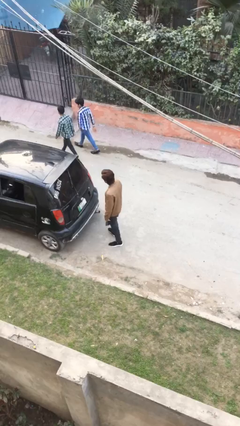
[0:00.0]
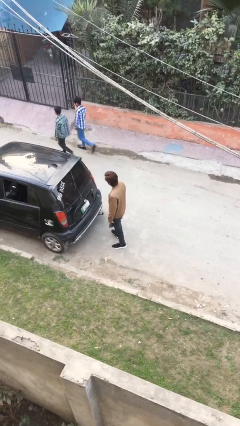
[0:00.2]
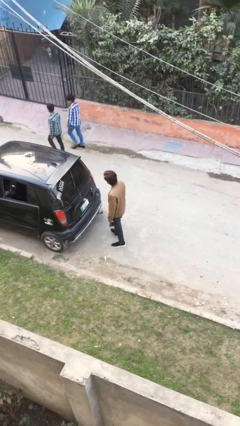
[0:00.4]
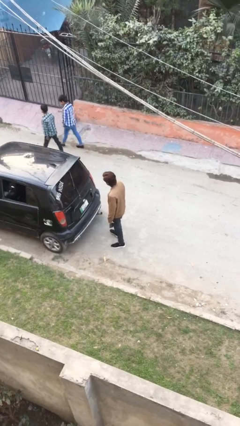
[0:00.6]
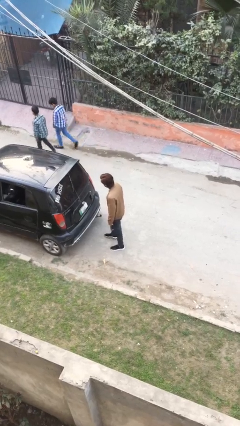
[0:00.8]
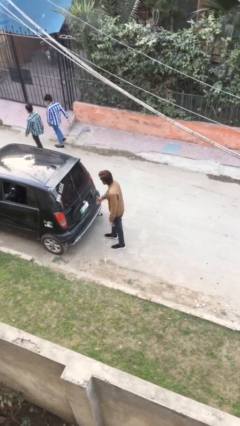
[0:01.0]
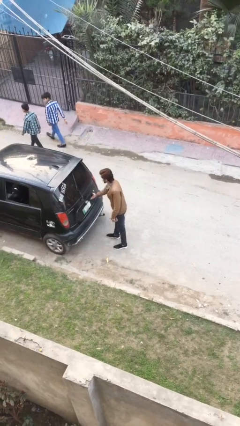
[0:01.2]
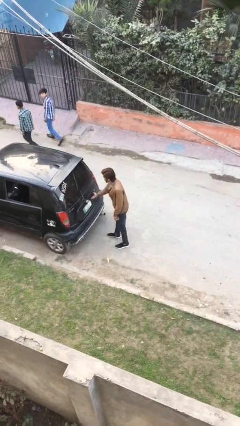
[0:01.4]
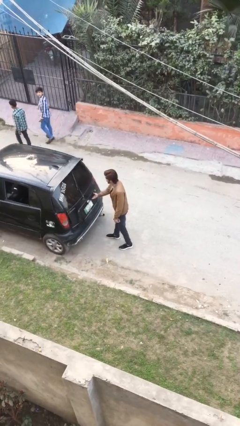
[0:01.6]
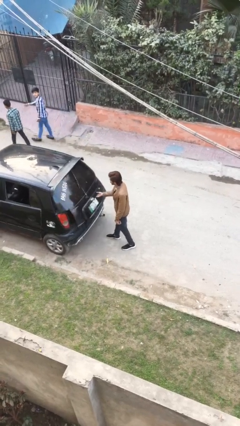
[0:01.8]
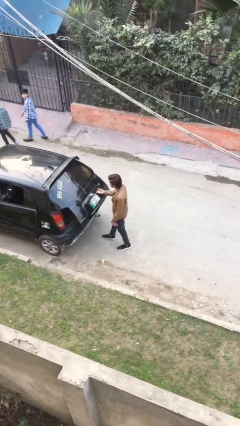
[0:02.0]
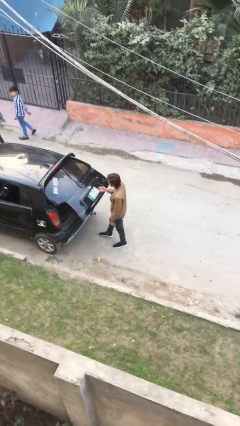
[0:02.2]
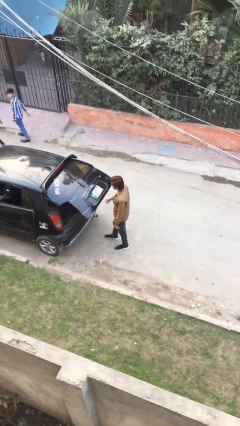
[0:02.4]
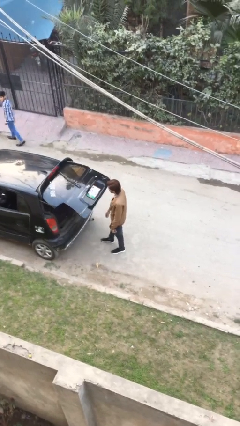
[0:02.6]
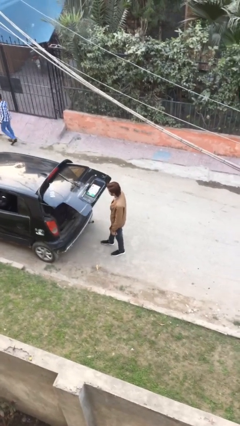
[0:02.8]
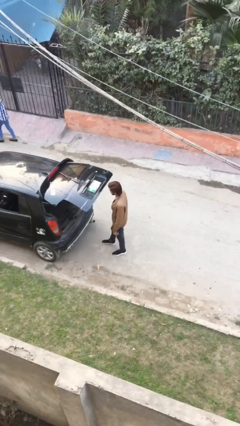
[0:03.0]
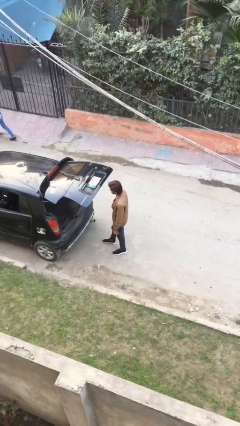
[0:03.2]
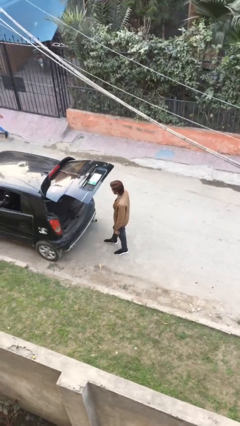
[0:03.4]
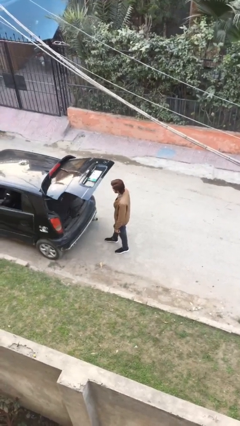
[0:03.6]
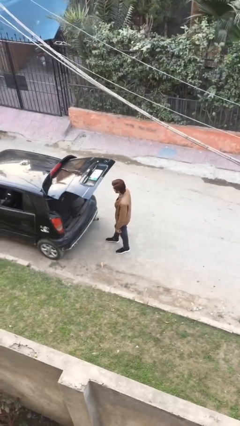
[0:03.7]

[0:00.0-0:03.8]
person opens car trunk

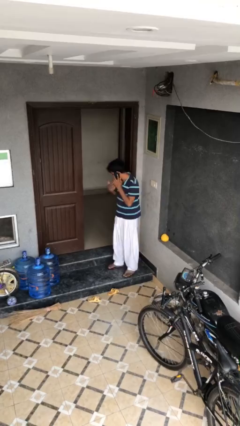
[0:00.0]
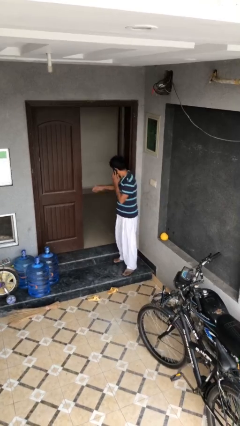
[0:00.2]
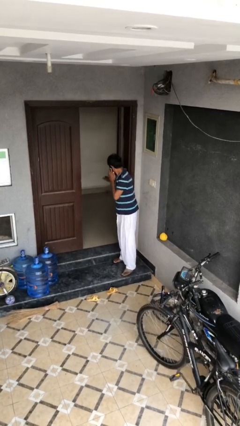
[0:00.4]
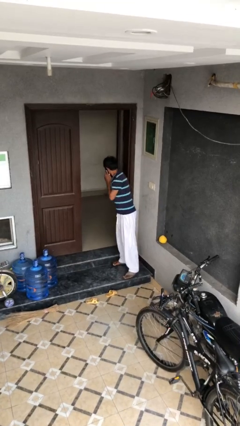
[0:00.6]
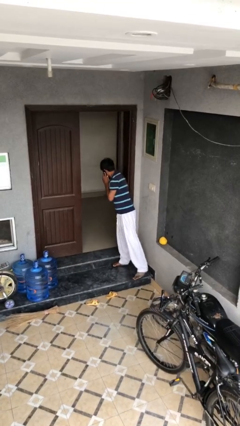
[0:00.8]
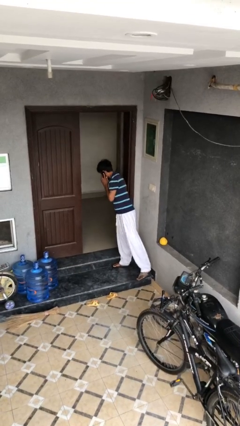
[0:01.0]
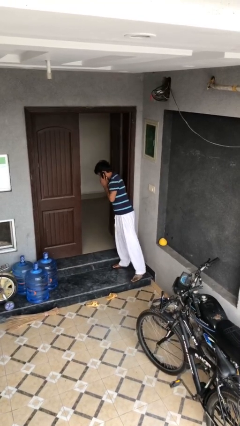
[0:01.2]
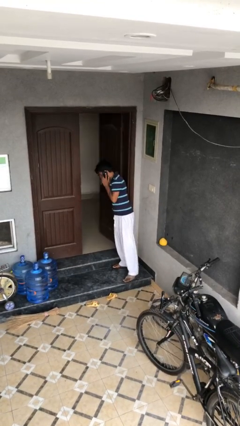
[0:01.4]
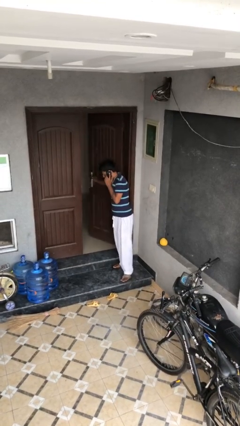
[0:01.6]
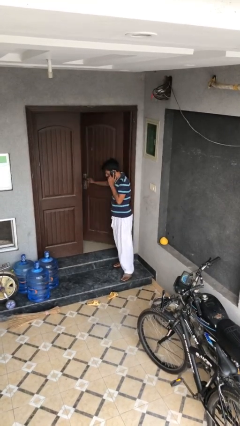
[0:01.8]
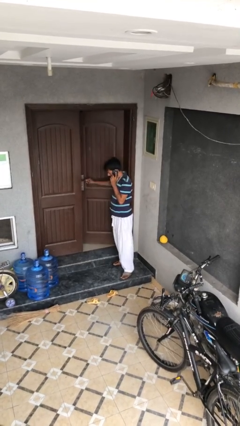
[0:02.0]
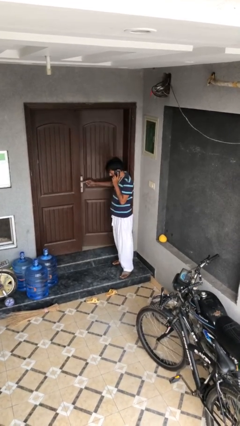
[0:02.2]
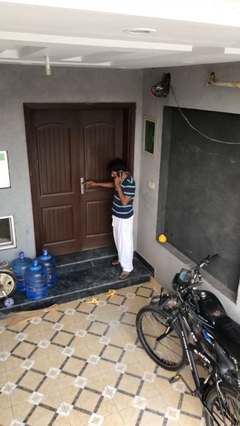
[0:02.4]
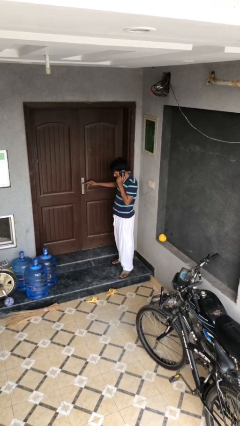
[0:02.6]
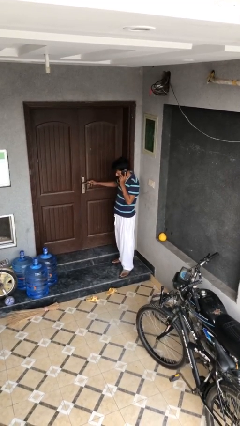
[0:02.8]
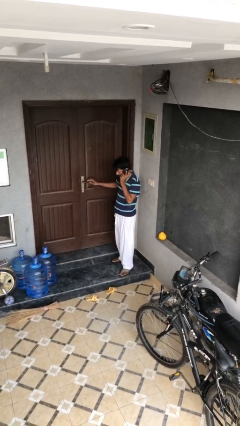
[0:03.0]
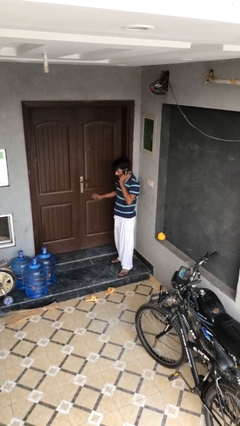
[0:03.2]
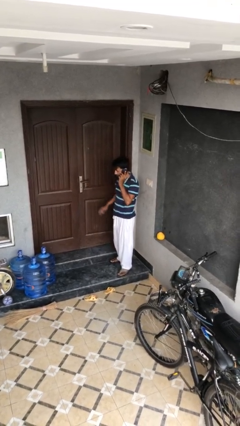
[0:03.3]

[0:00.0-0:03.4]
person closes facility door

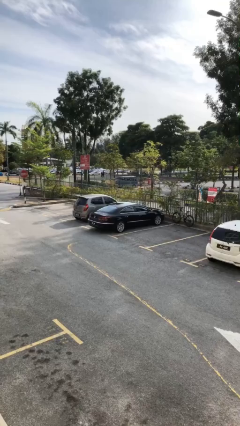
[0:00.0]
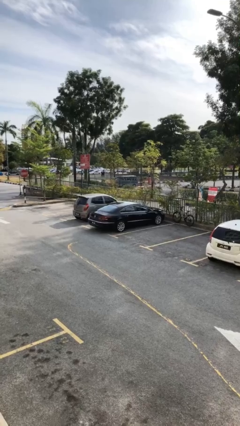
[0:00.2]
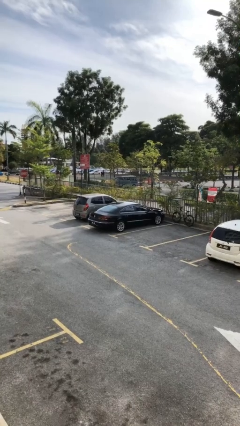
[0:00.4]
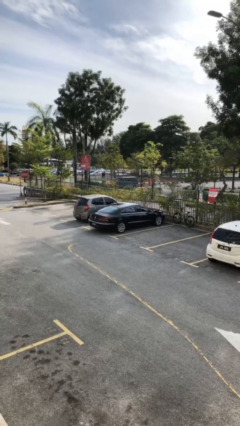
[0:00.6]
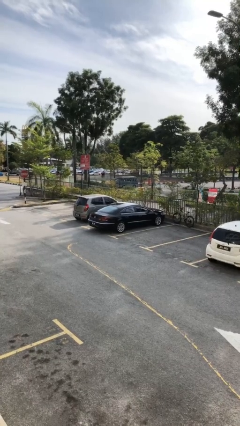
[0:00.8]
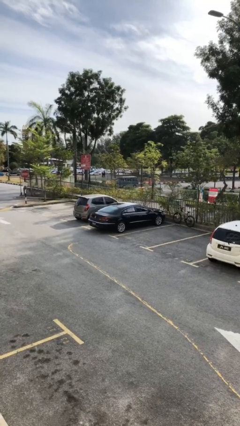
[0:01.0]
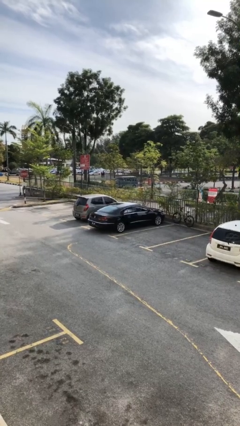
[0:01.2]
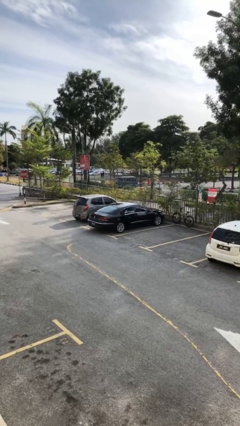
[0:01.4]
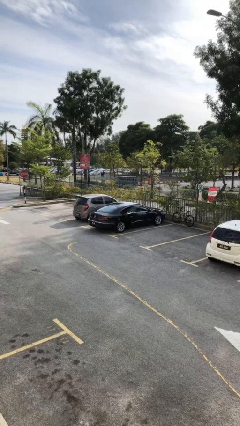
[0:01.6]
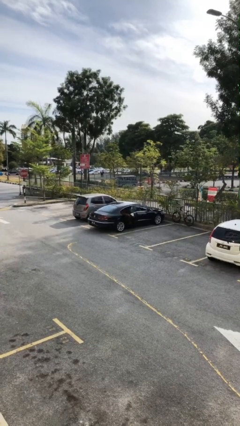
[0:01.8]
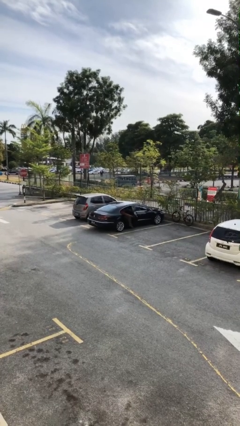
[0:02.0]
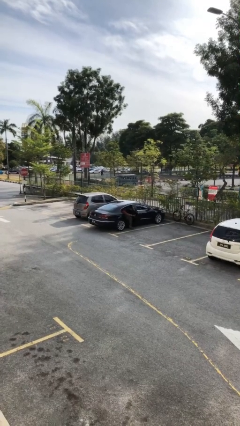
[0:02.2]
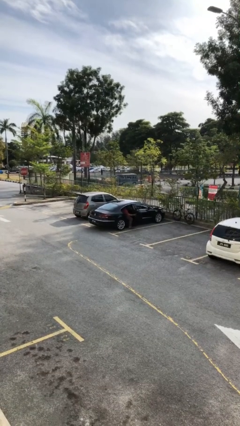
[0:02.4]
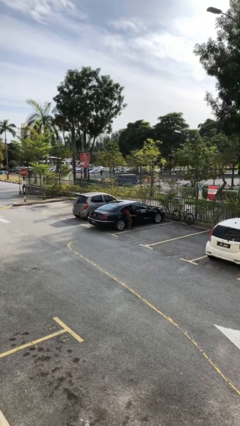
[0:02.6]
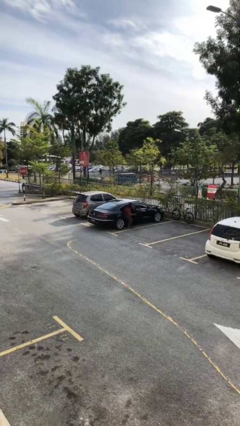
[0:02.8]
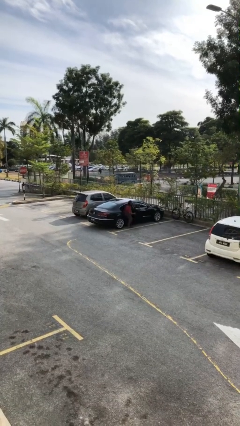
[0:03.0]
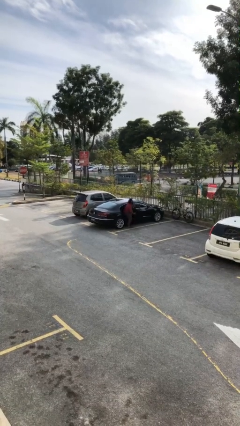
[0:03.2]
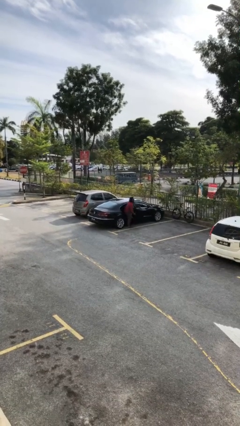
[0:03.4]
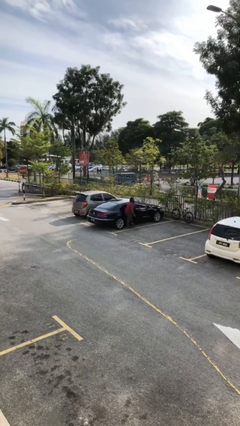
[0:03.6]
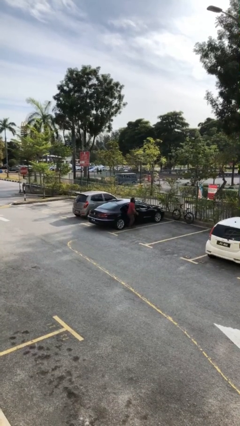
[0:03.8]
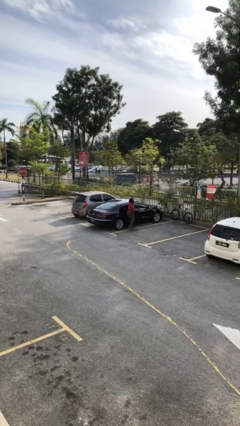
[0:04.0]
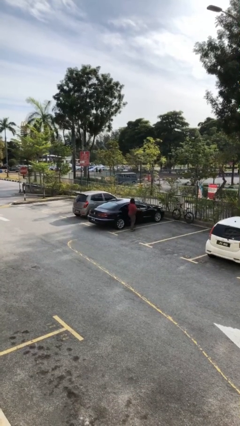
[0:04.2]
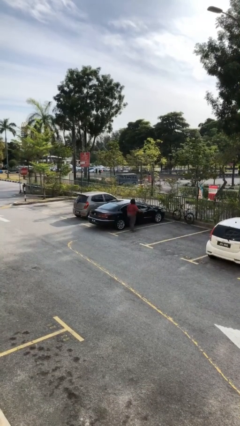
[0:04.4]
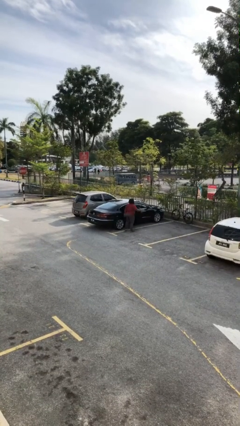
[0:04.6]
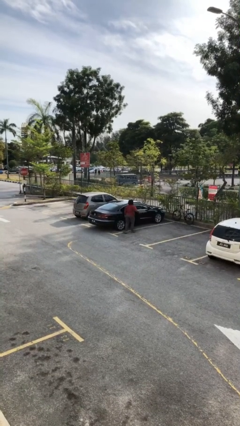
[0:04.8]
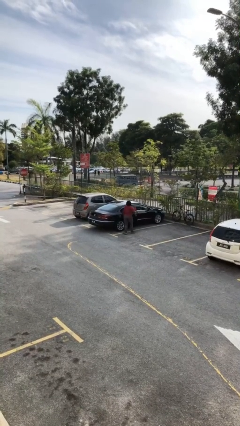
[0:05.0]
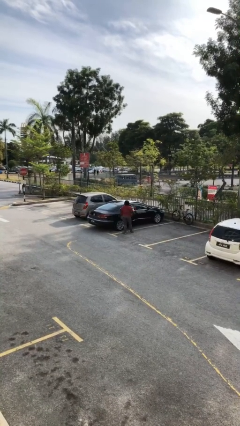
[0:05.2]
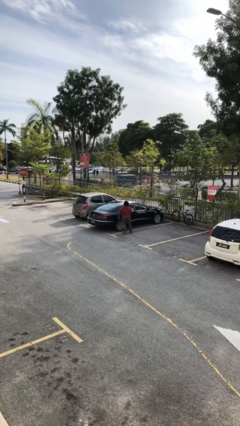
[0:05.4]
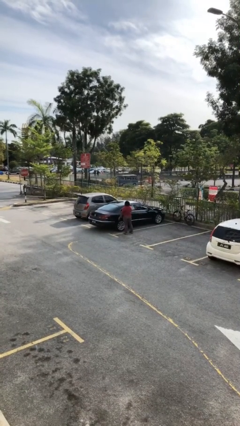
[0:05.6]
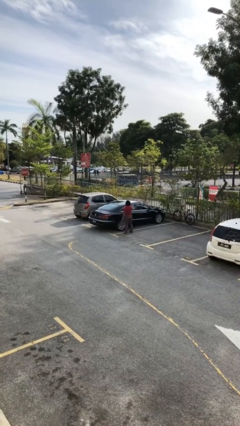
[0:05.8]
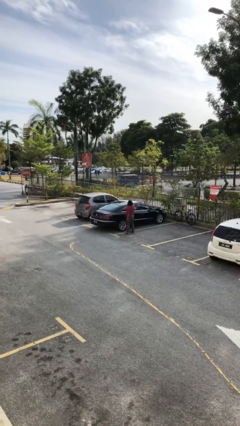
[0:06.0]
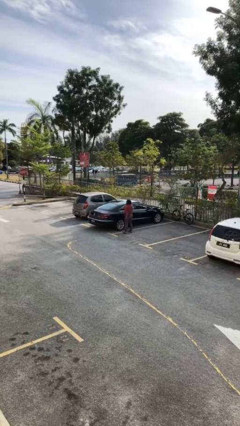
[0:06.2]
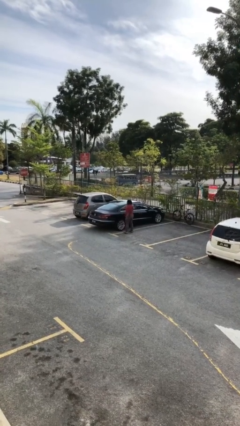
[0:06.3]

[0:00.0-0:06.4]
car drops off person
